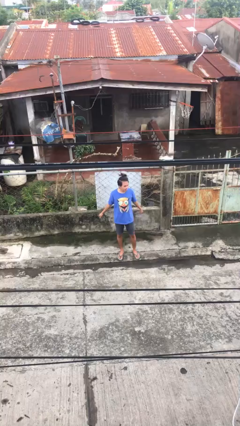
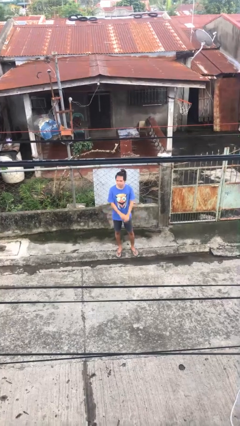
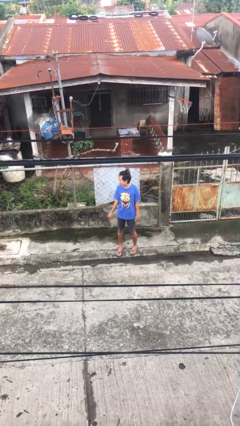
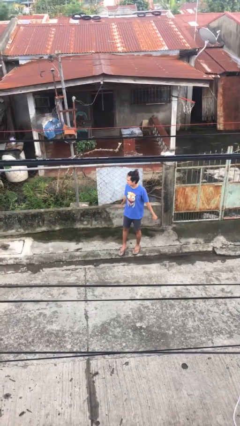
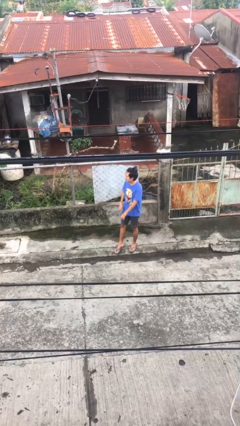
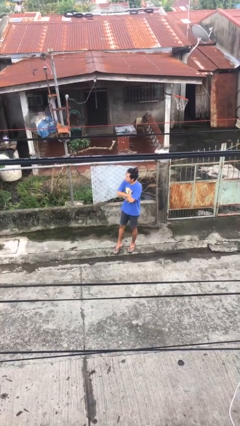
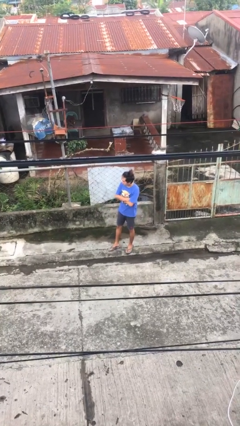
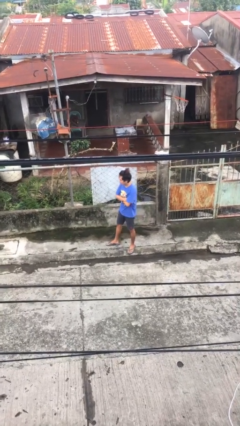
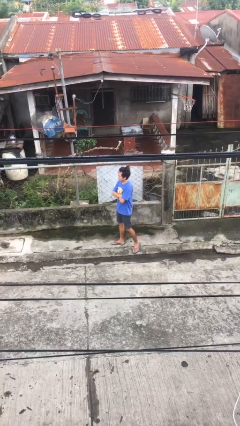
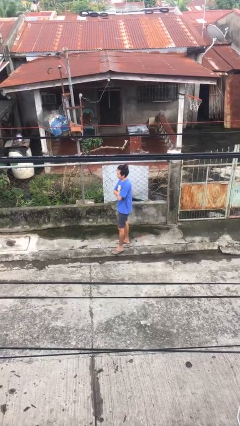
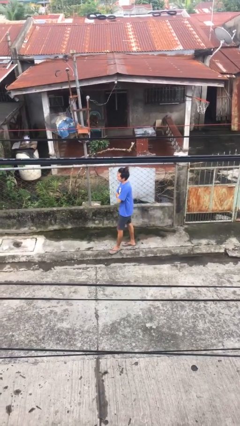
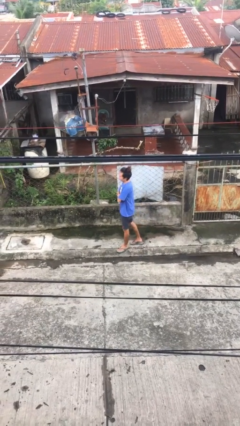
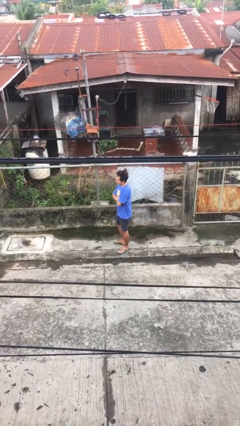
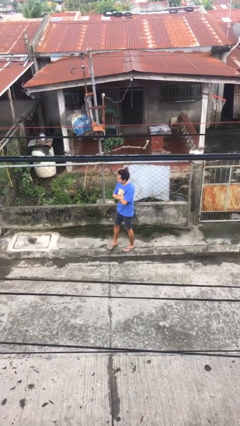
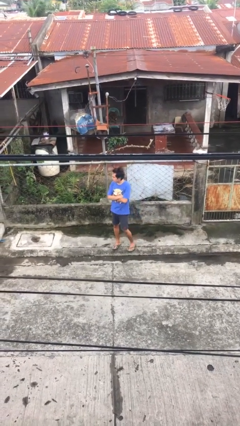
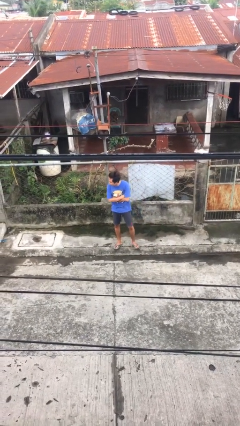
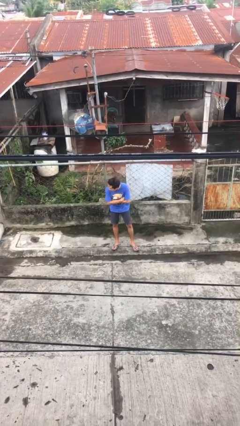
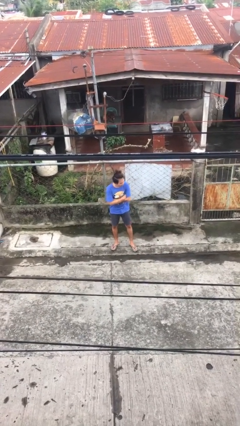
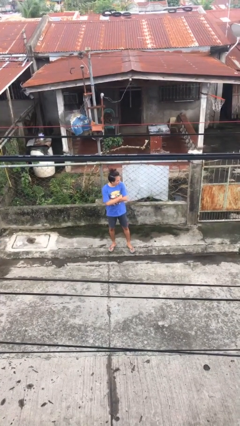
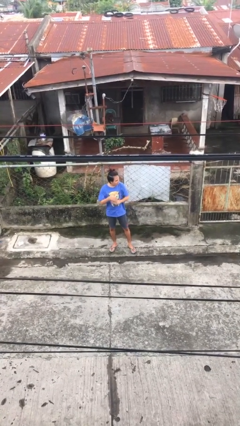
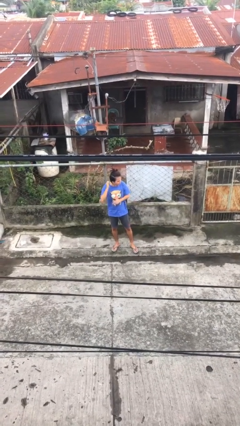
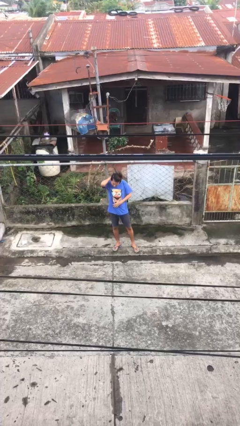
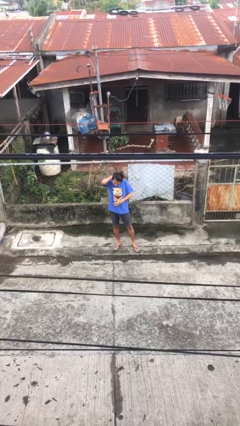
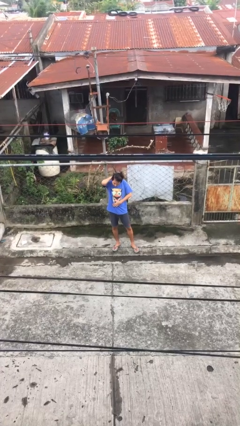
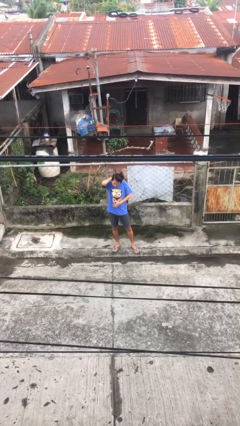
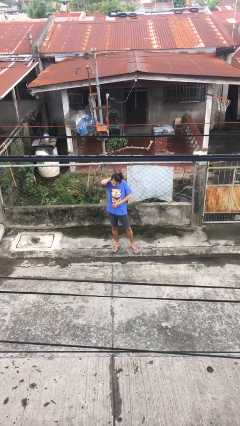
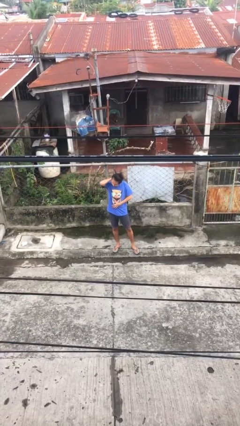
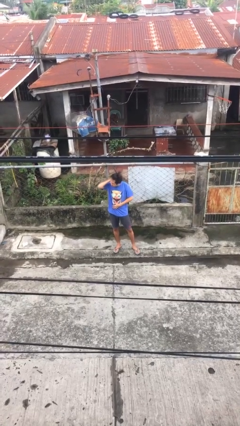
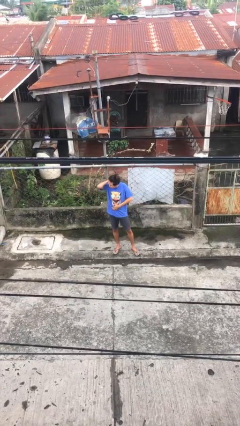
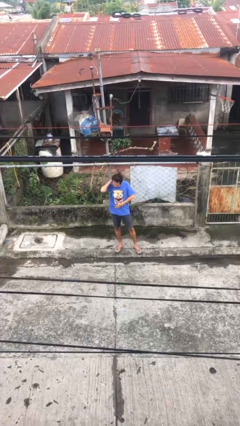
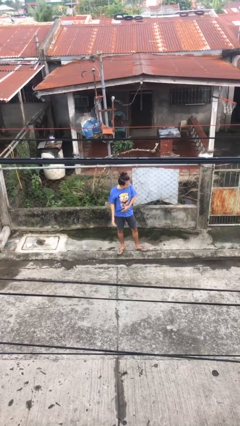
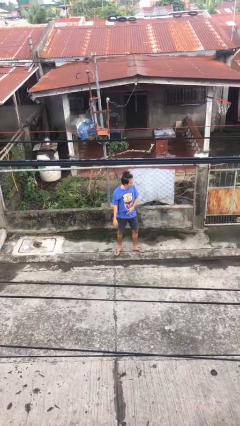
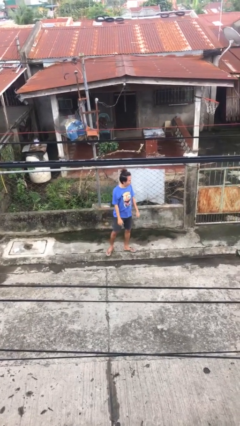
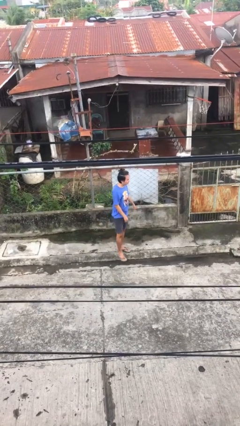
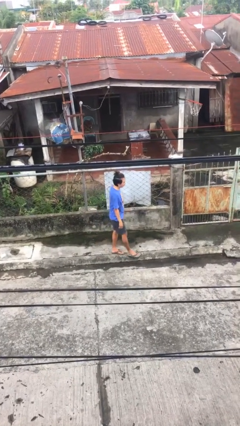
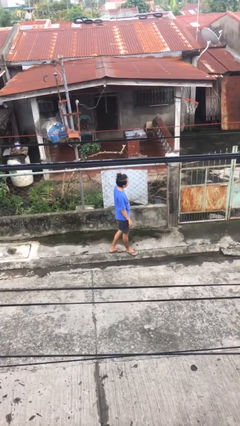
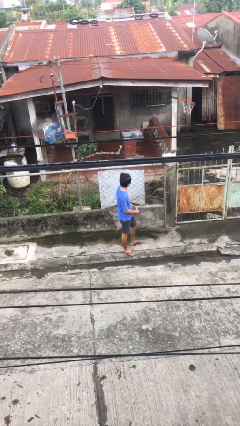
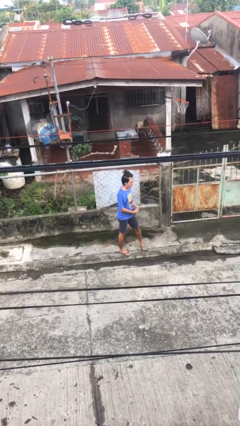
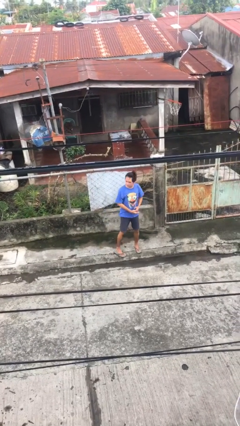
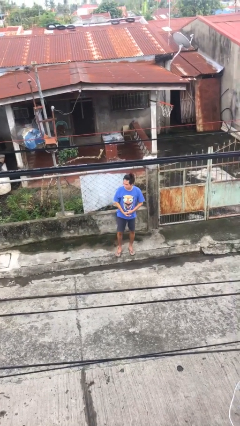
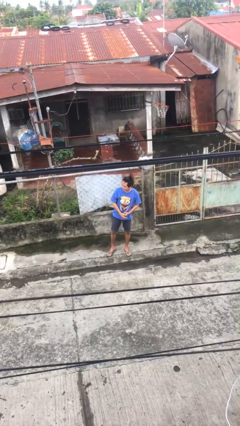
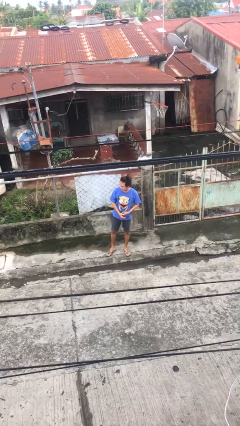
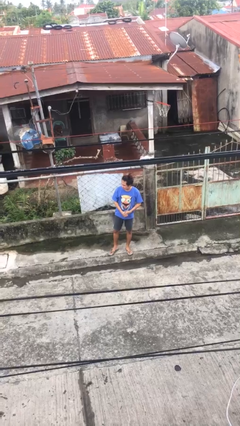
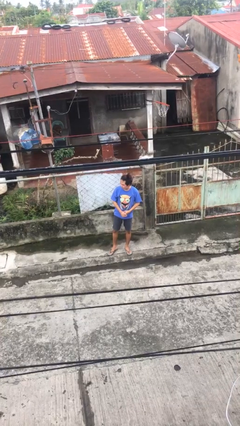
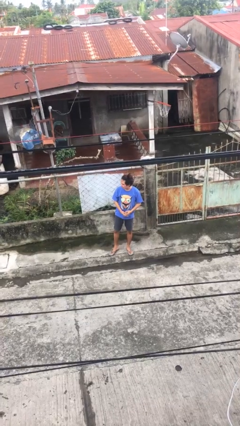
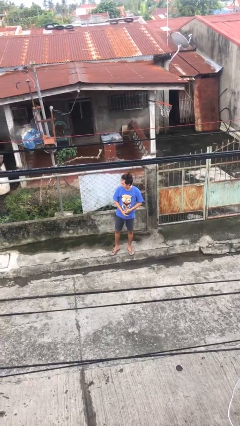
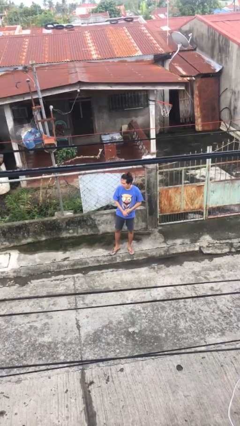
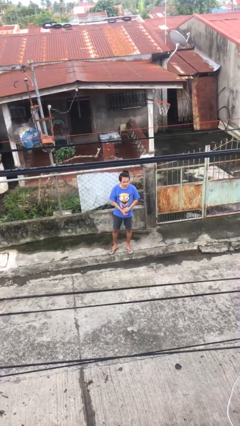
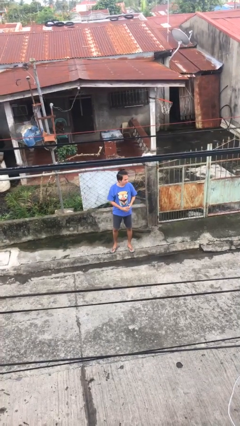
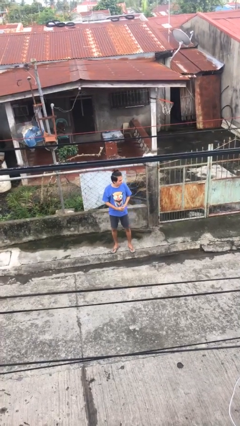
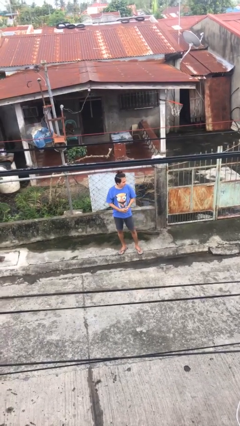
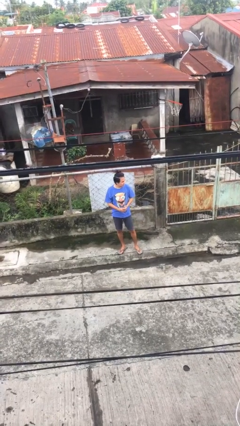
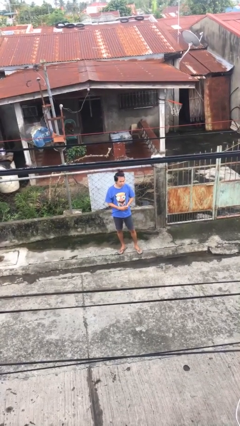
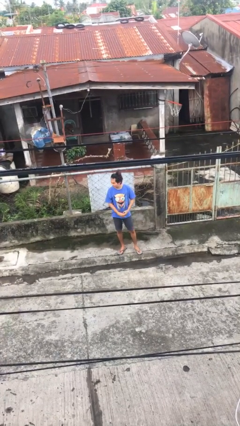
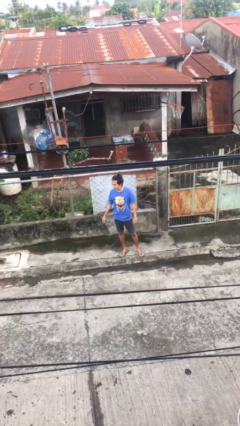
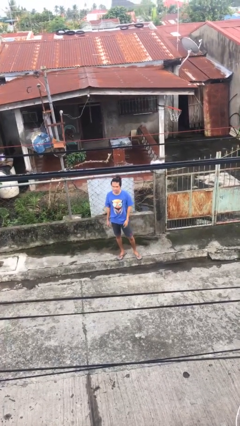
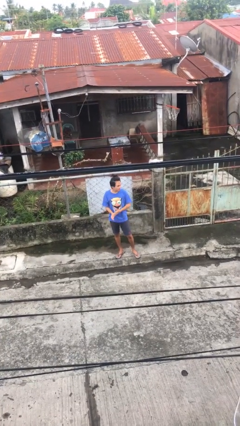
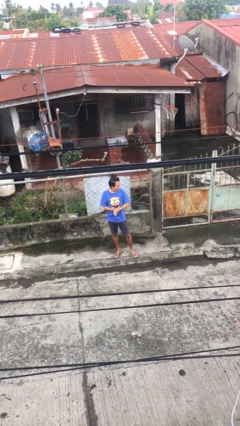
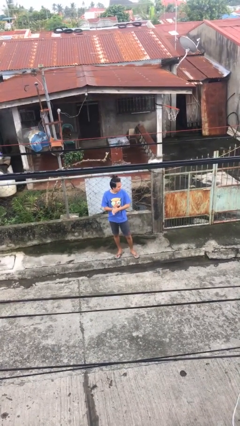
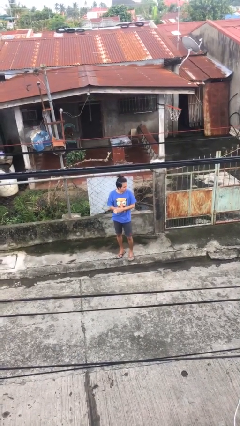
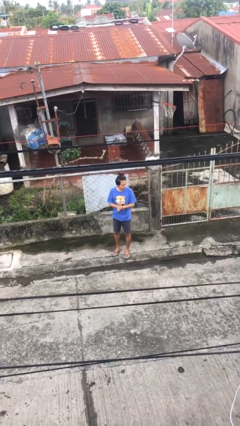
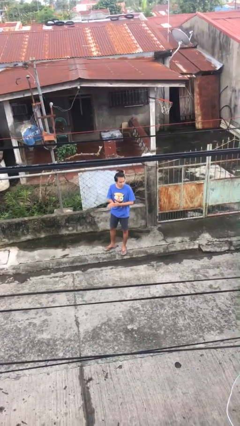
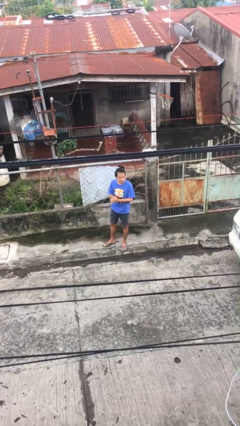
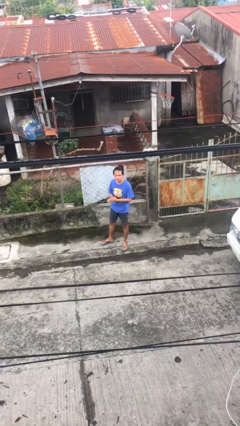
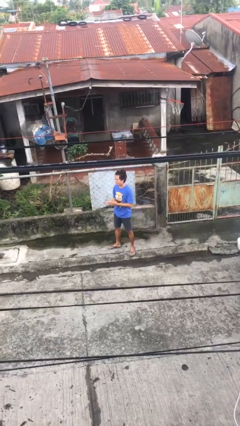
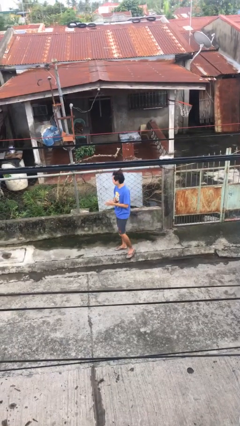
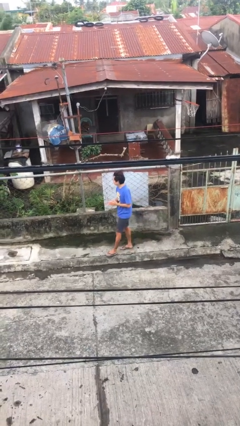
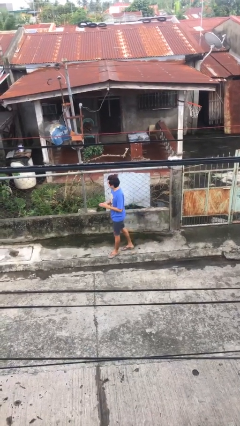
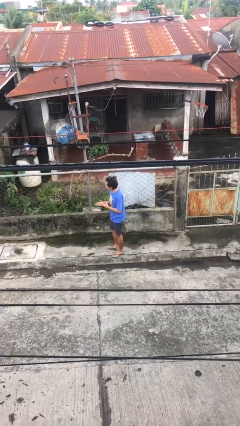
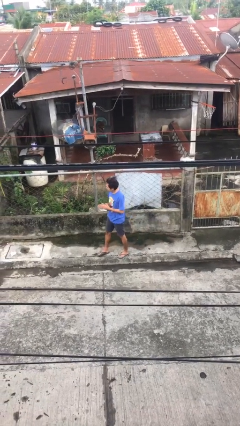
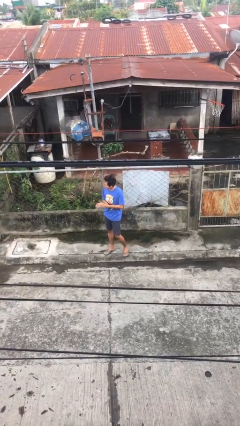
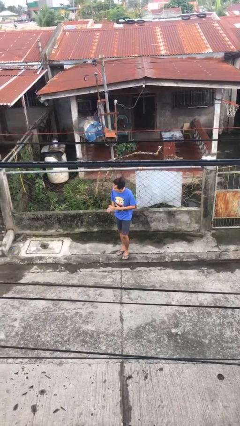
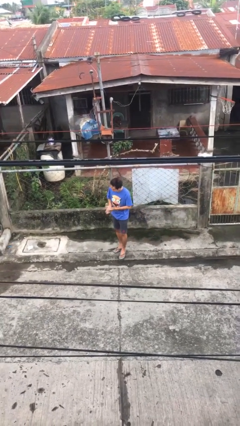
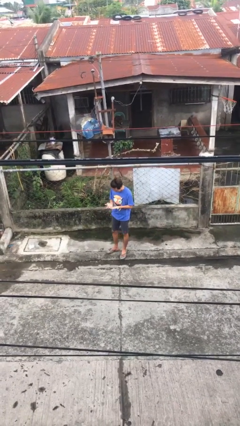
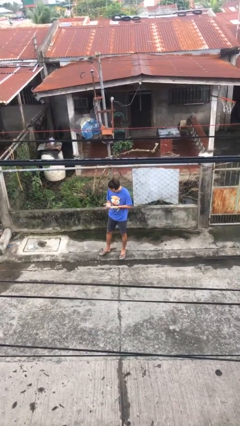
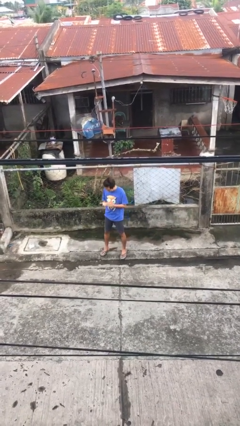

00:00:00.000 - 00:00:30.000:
person walks

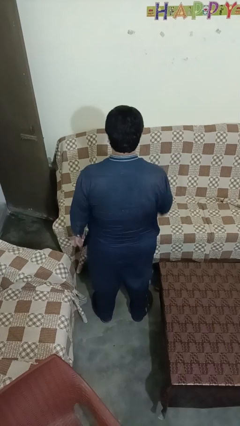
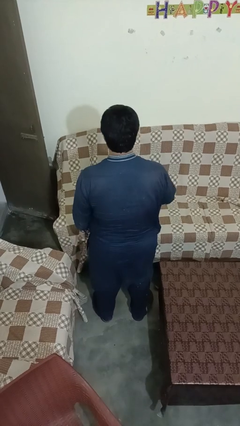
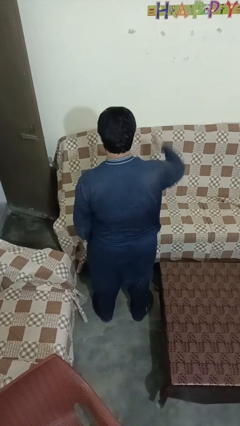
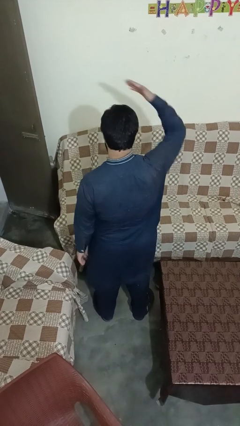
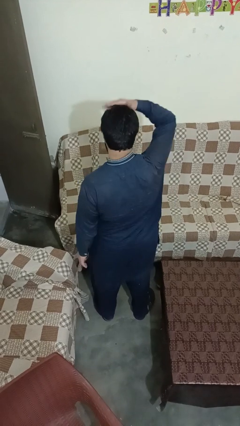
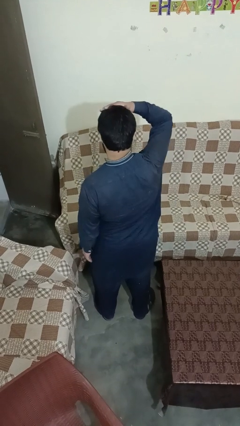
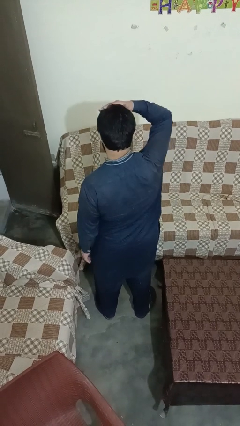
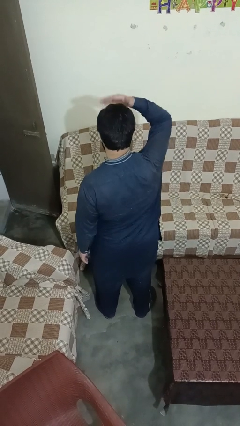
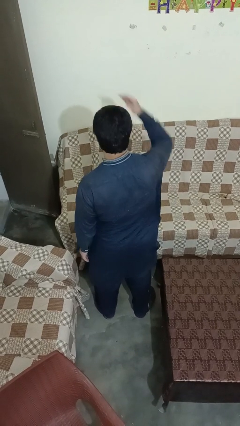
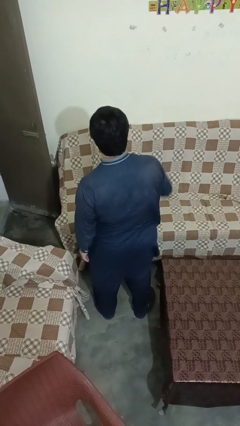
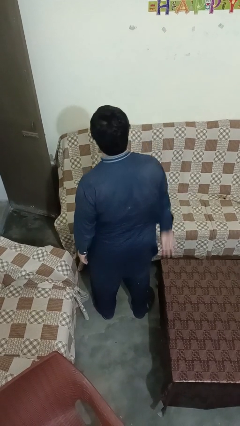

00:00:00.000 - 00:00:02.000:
person pats head

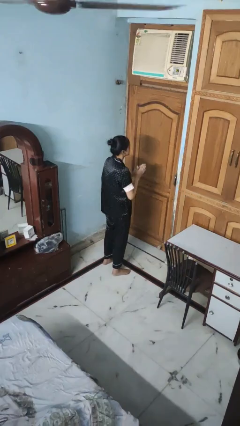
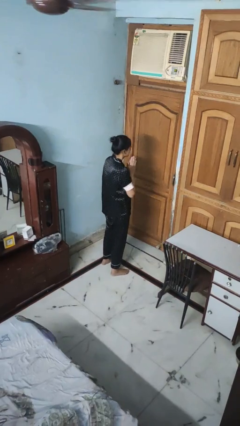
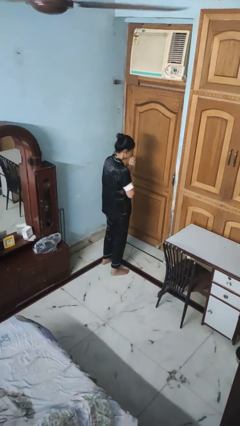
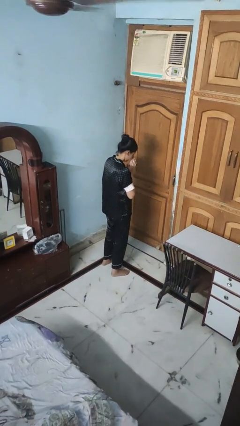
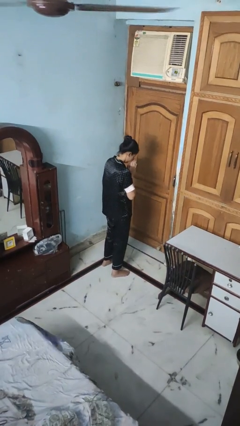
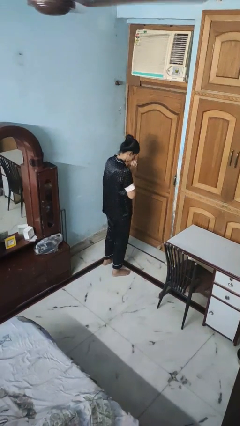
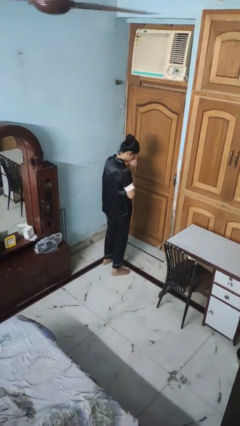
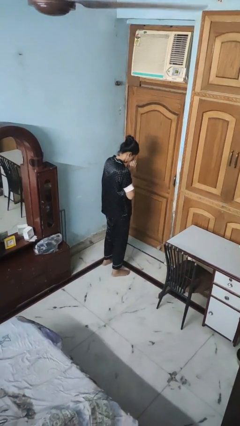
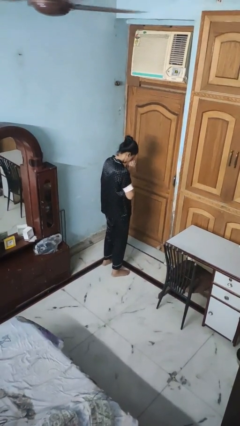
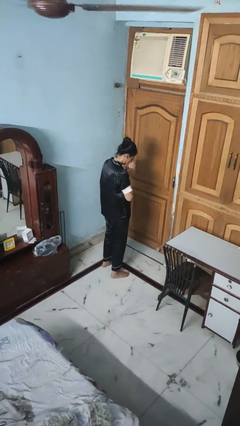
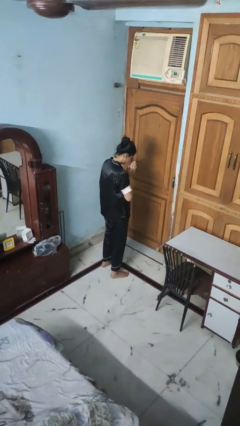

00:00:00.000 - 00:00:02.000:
person prays
